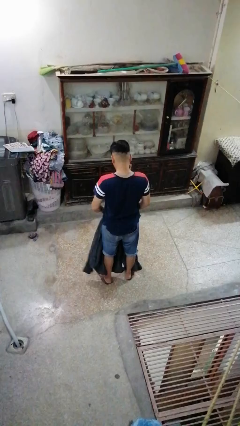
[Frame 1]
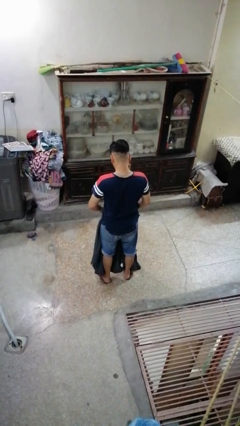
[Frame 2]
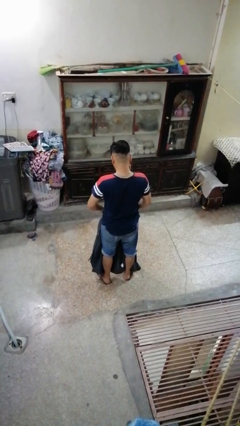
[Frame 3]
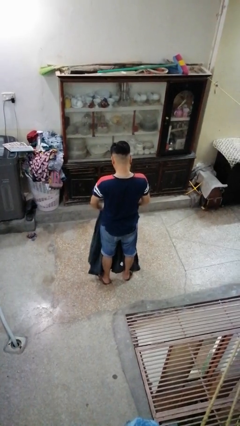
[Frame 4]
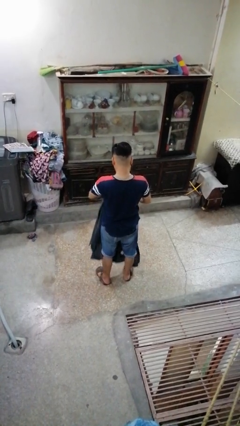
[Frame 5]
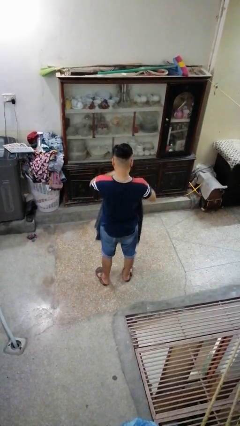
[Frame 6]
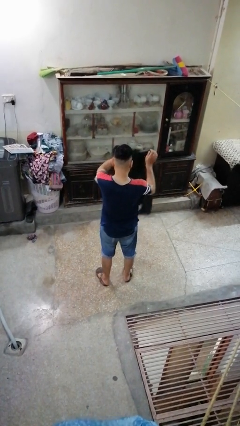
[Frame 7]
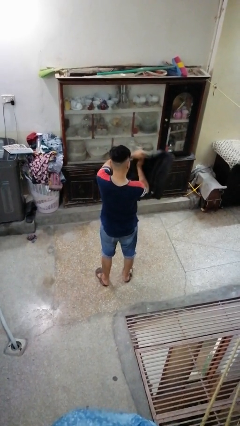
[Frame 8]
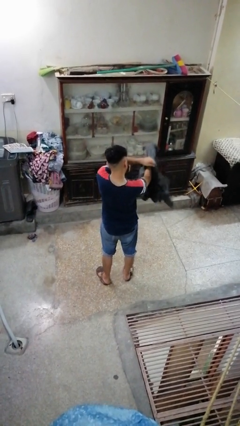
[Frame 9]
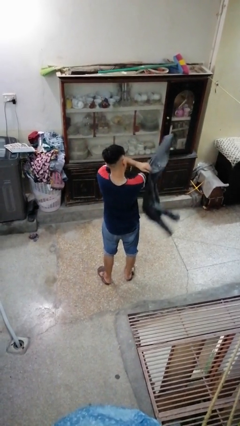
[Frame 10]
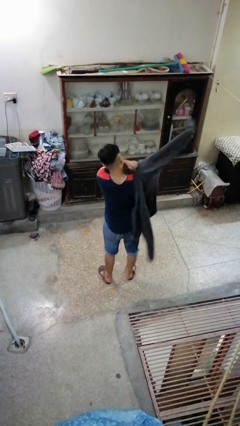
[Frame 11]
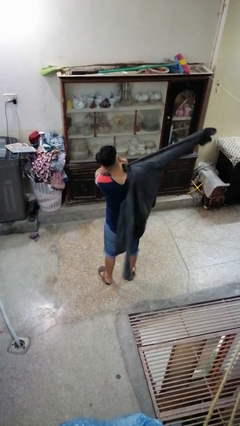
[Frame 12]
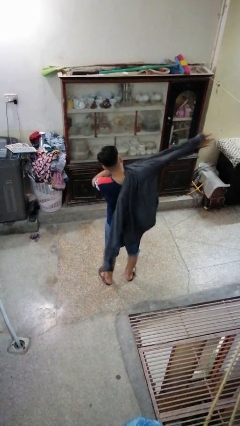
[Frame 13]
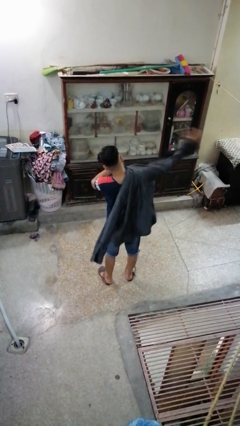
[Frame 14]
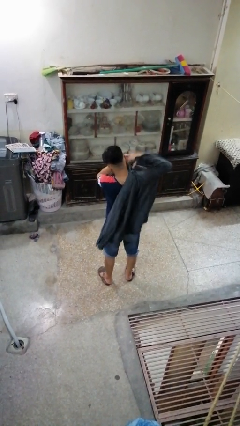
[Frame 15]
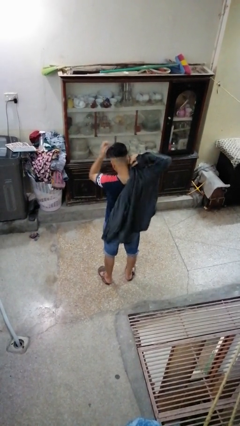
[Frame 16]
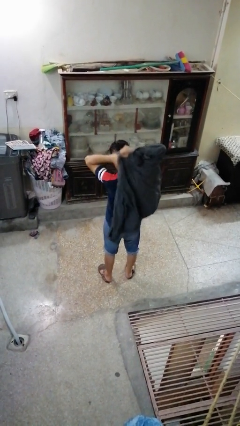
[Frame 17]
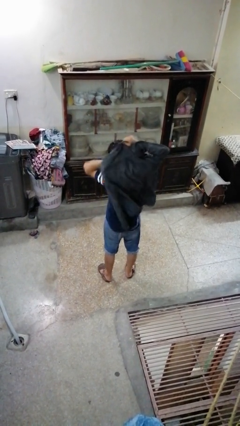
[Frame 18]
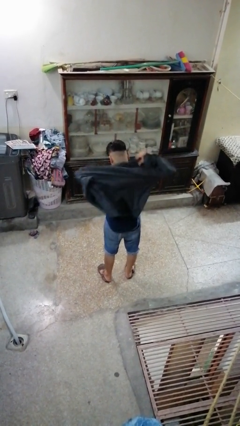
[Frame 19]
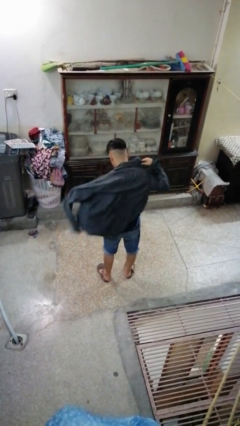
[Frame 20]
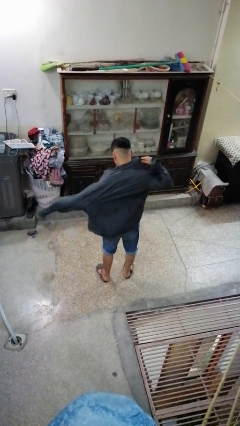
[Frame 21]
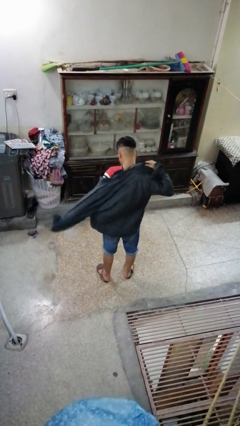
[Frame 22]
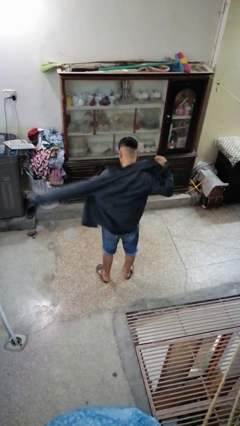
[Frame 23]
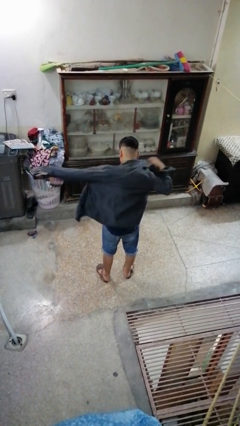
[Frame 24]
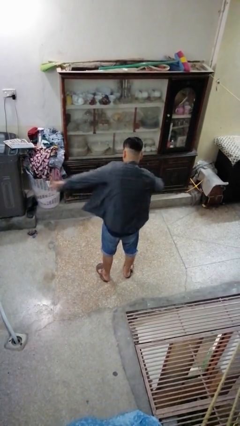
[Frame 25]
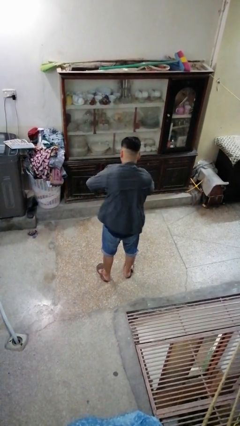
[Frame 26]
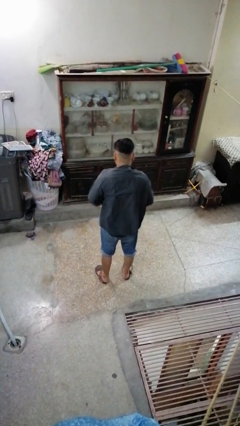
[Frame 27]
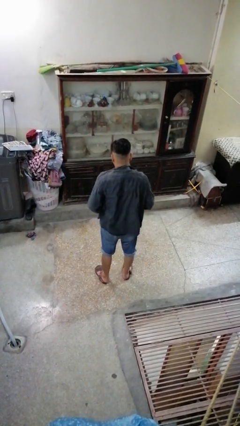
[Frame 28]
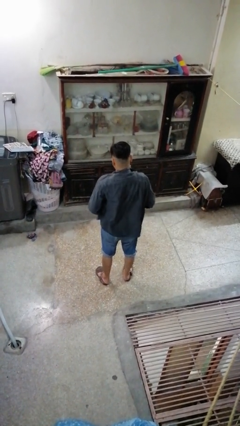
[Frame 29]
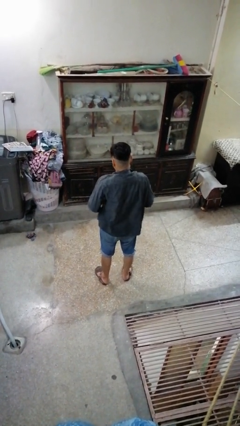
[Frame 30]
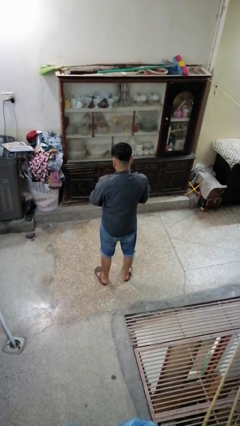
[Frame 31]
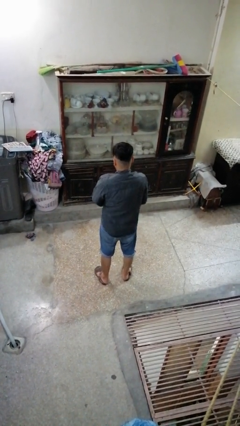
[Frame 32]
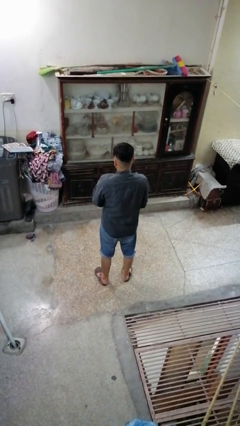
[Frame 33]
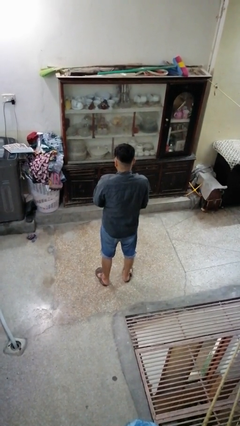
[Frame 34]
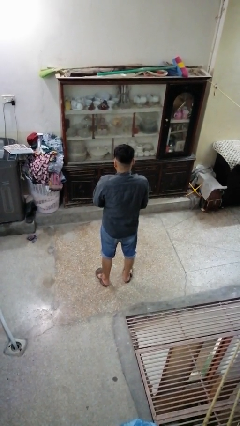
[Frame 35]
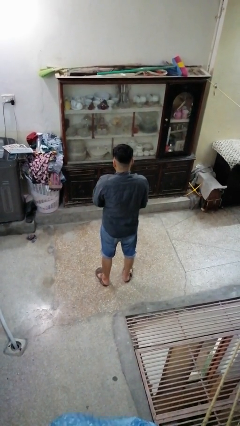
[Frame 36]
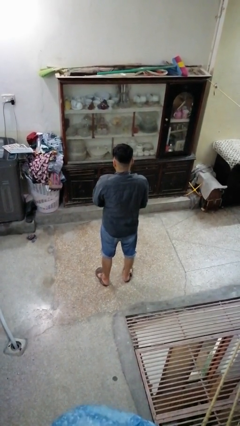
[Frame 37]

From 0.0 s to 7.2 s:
person puts on shirt

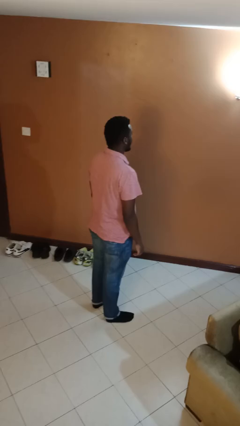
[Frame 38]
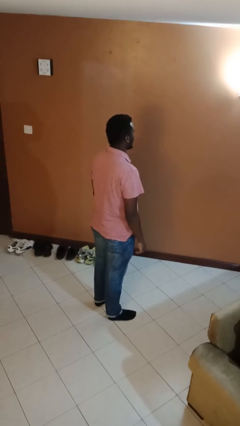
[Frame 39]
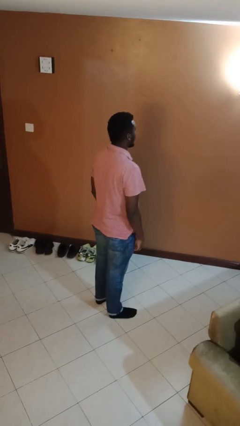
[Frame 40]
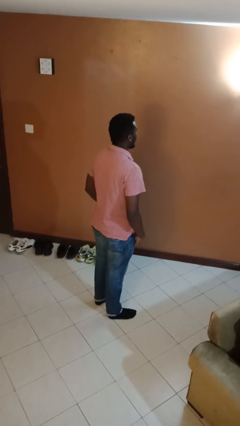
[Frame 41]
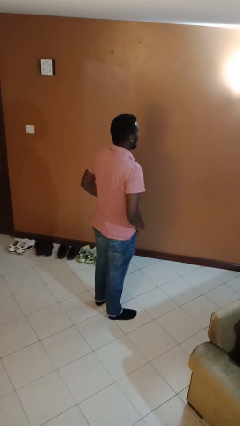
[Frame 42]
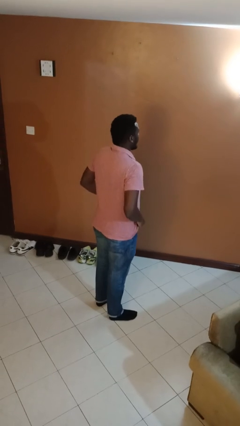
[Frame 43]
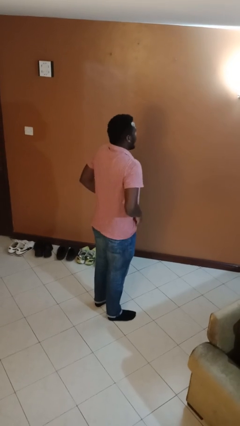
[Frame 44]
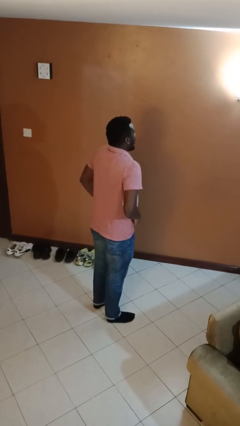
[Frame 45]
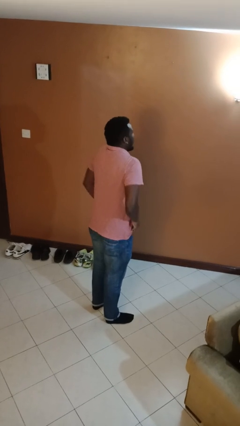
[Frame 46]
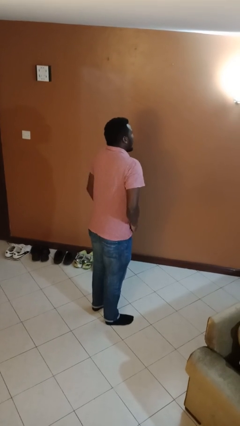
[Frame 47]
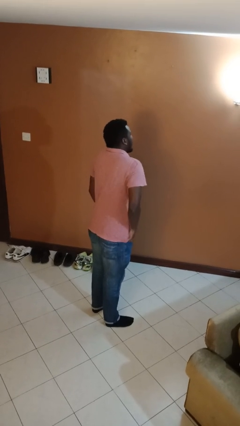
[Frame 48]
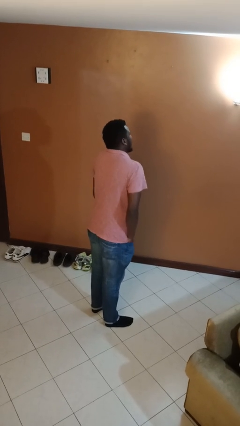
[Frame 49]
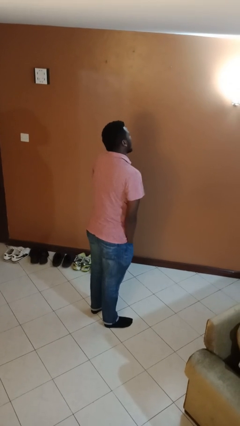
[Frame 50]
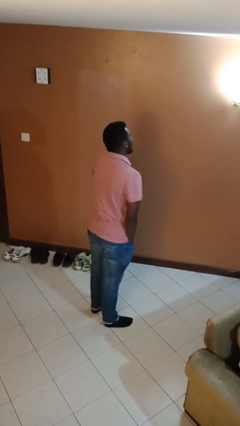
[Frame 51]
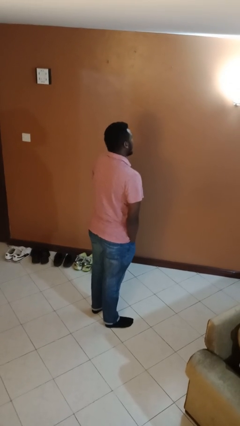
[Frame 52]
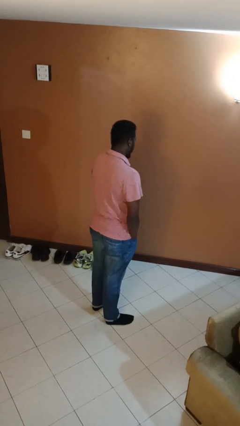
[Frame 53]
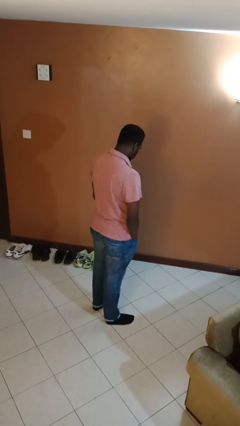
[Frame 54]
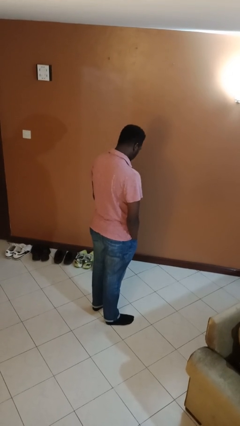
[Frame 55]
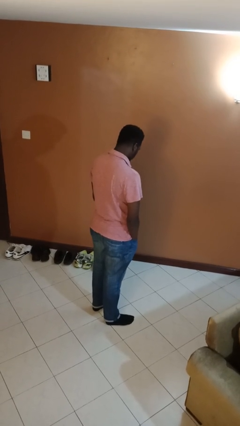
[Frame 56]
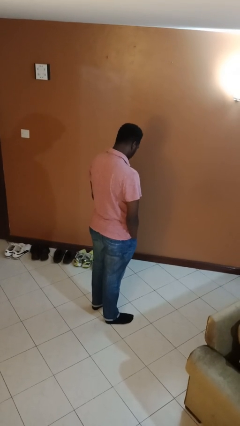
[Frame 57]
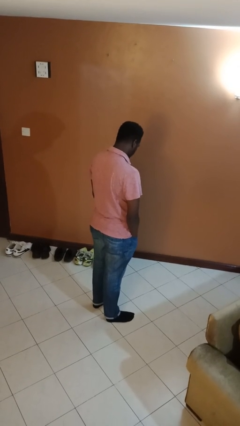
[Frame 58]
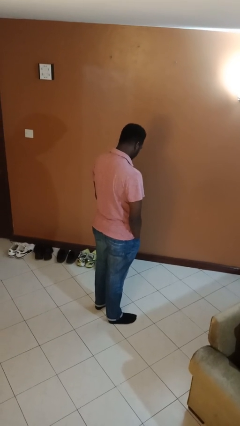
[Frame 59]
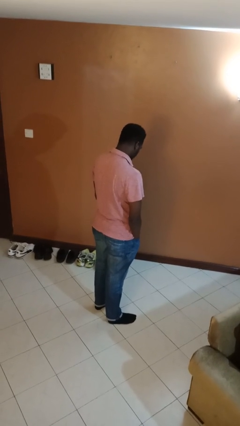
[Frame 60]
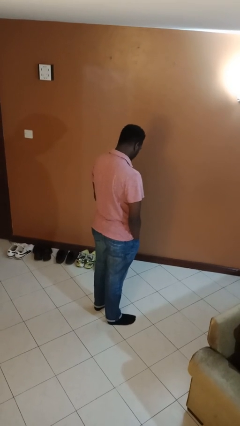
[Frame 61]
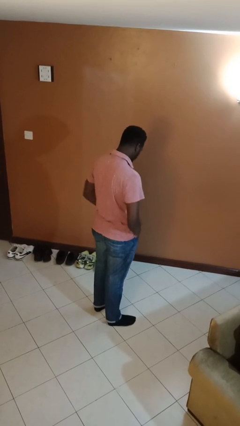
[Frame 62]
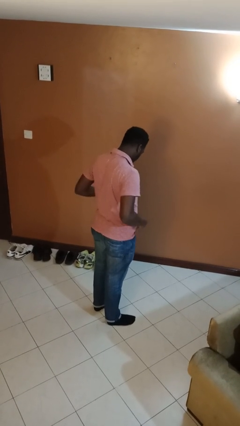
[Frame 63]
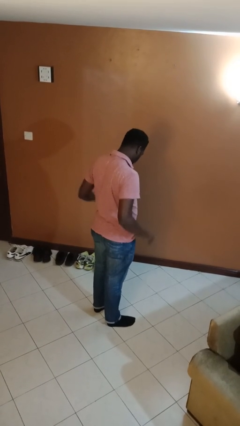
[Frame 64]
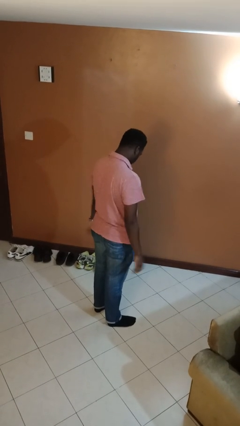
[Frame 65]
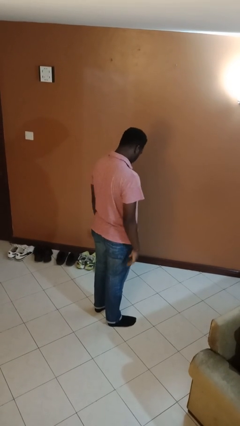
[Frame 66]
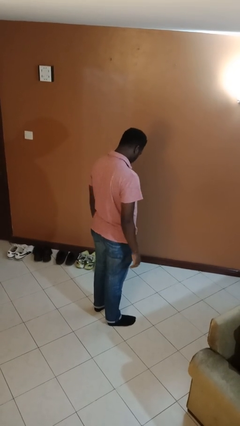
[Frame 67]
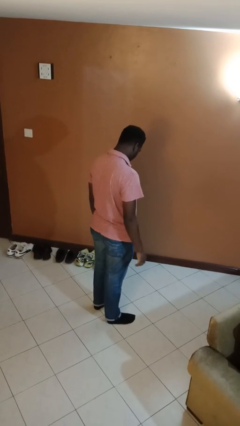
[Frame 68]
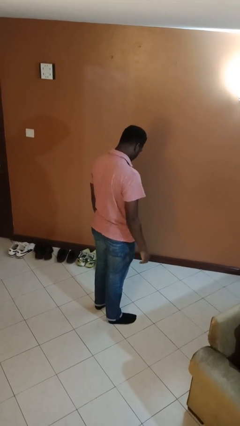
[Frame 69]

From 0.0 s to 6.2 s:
person puts hands in back pockets

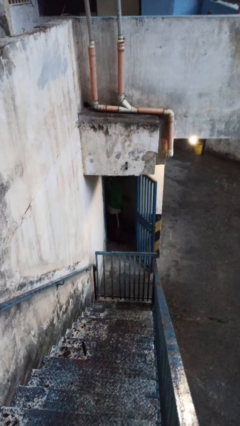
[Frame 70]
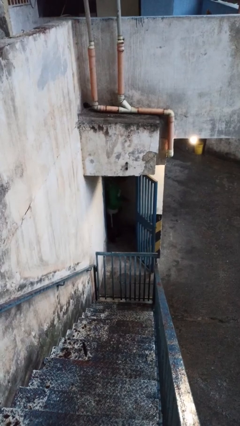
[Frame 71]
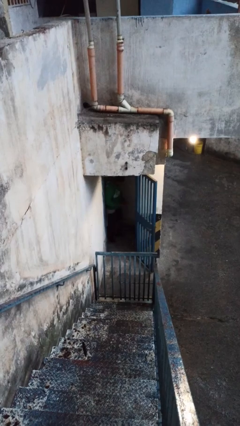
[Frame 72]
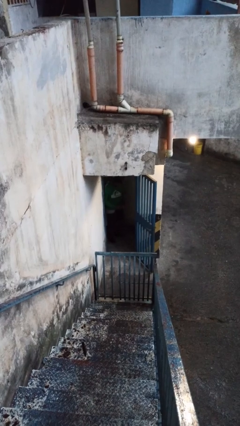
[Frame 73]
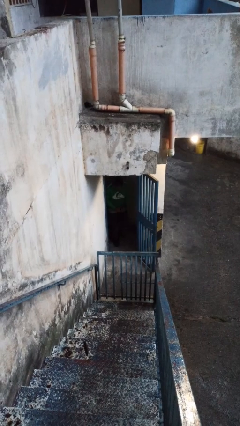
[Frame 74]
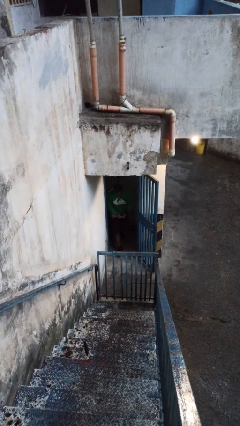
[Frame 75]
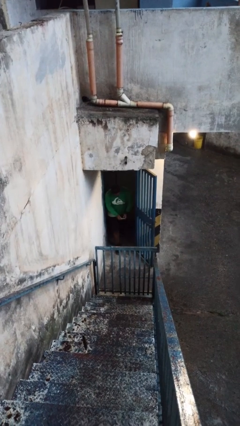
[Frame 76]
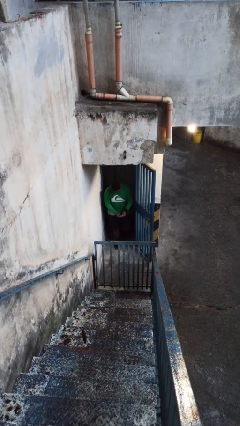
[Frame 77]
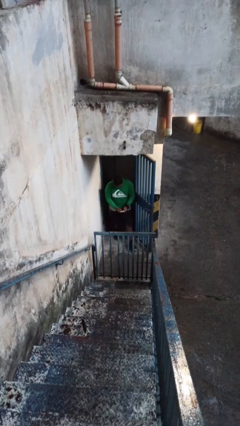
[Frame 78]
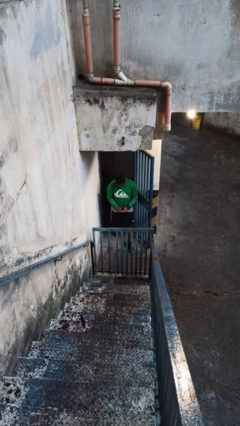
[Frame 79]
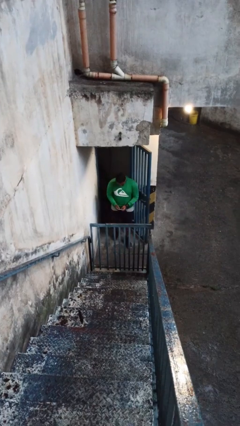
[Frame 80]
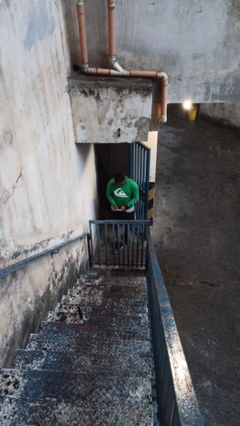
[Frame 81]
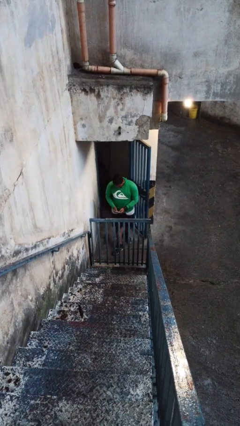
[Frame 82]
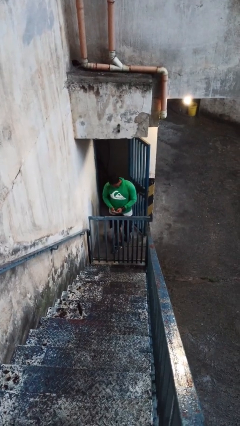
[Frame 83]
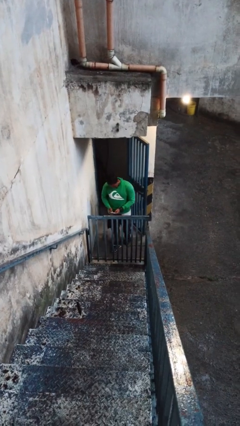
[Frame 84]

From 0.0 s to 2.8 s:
person enters scene through structure

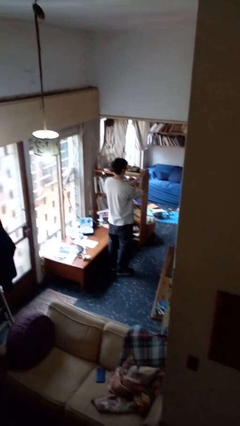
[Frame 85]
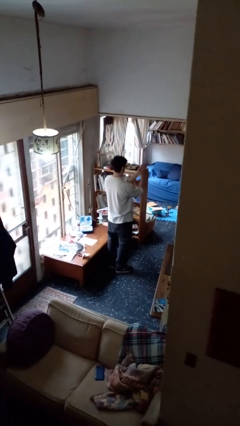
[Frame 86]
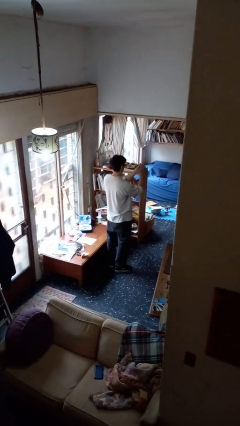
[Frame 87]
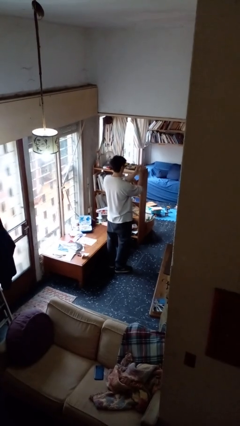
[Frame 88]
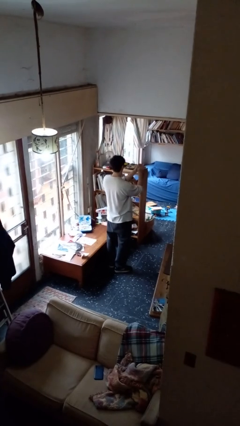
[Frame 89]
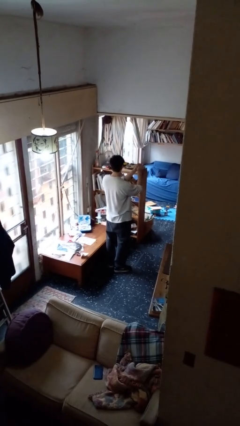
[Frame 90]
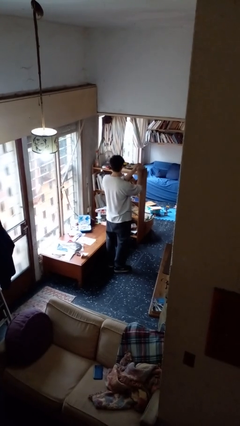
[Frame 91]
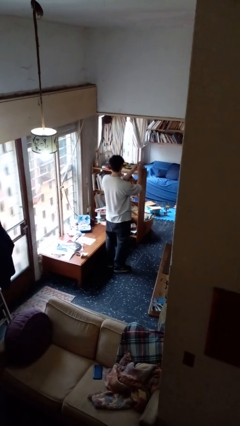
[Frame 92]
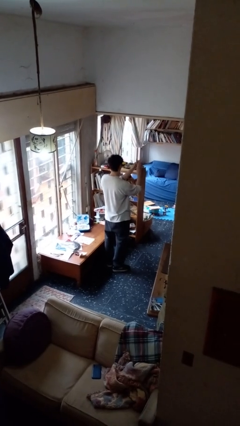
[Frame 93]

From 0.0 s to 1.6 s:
person crumples paper

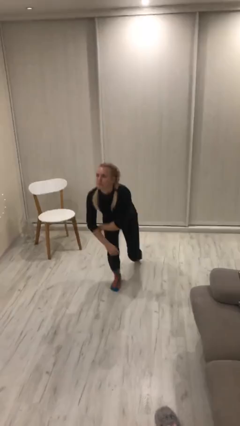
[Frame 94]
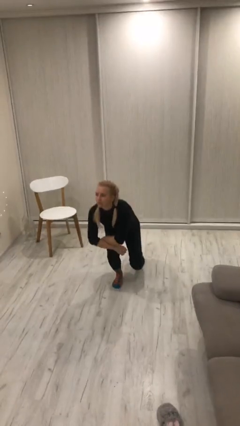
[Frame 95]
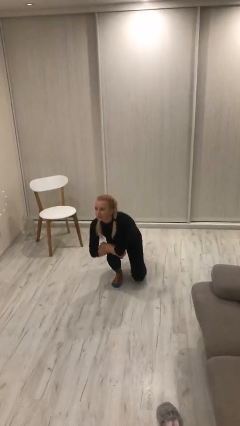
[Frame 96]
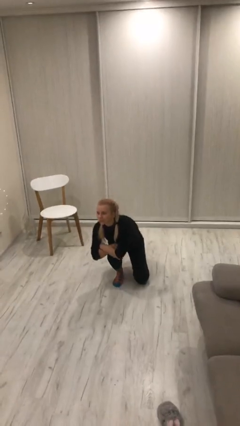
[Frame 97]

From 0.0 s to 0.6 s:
person sits down
